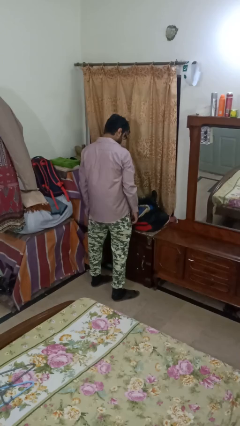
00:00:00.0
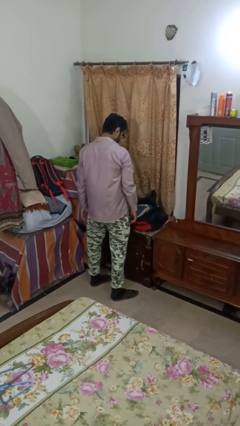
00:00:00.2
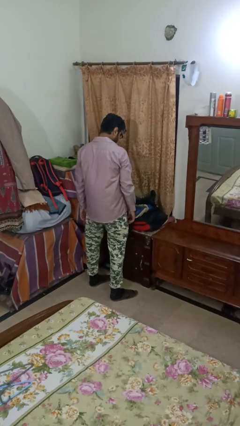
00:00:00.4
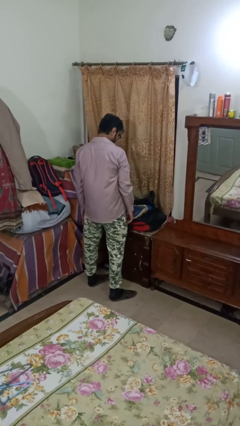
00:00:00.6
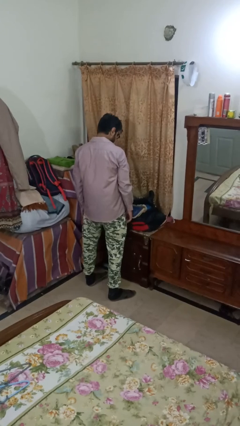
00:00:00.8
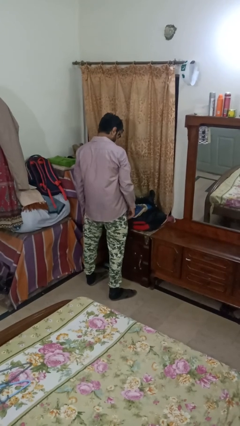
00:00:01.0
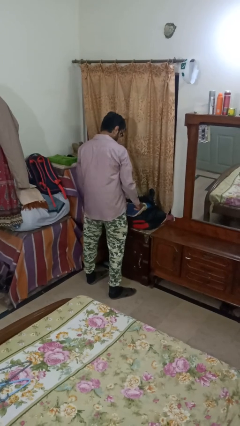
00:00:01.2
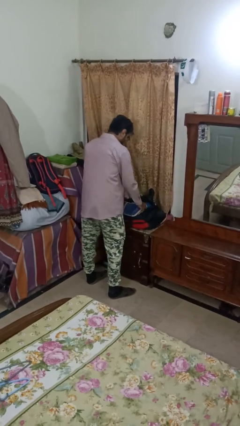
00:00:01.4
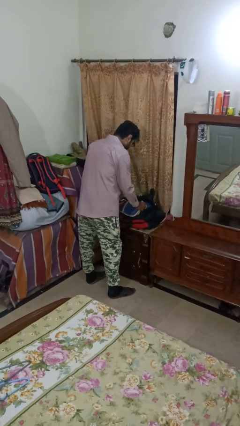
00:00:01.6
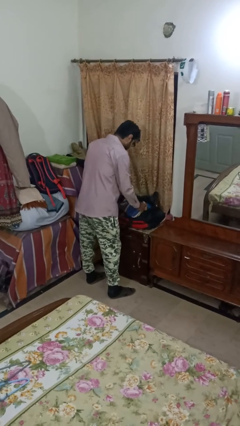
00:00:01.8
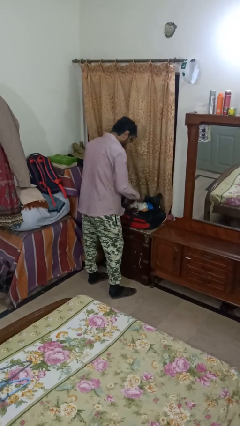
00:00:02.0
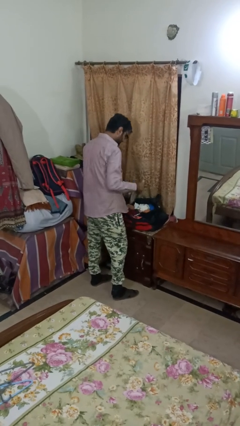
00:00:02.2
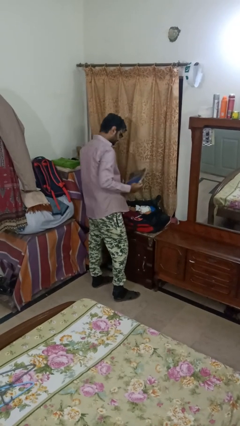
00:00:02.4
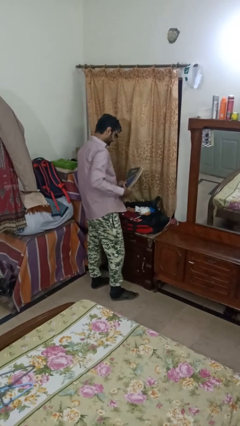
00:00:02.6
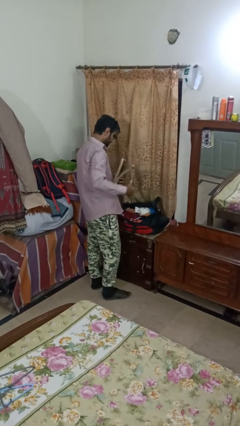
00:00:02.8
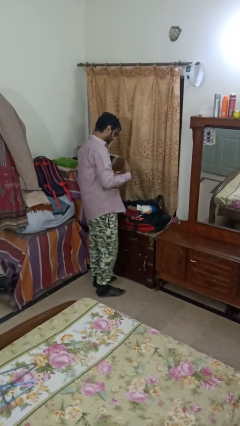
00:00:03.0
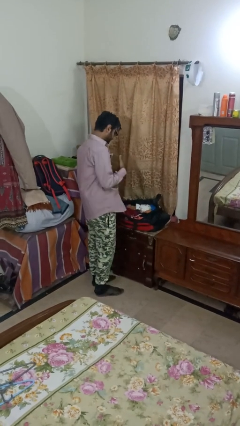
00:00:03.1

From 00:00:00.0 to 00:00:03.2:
person takes object from bag

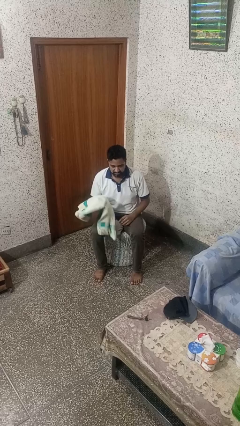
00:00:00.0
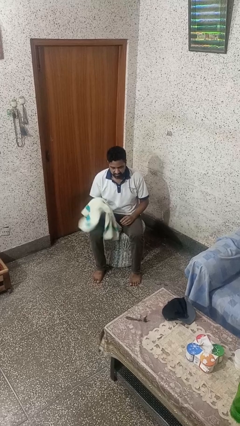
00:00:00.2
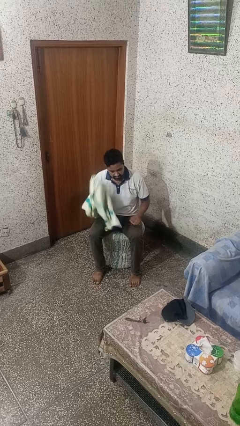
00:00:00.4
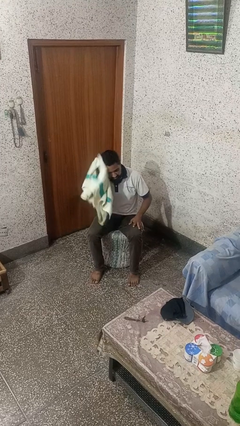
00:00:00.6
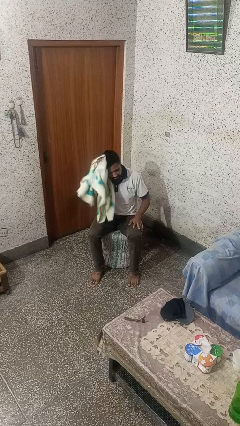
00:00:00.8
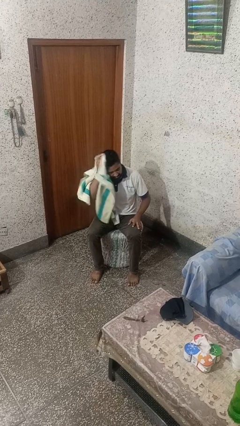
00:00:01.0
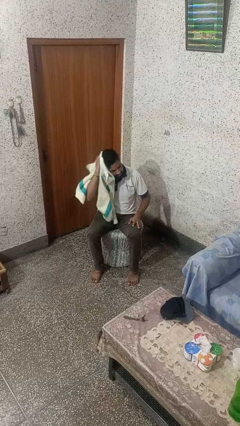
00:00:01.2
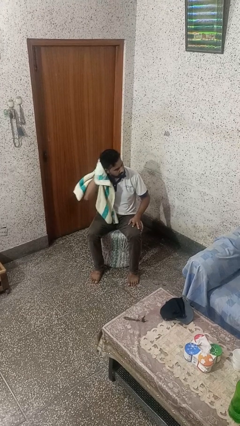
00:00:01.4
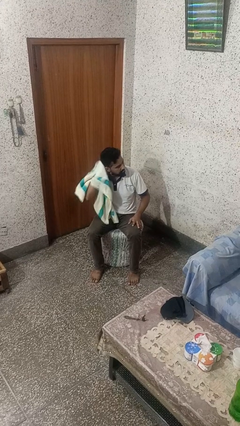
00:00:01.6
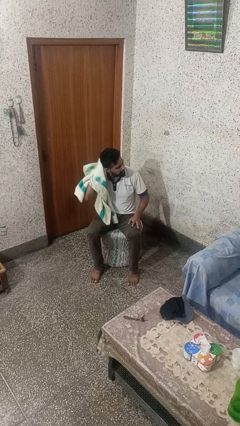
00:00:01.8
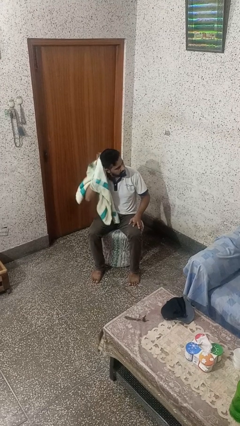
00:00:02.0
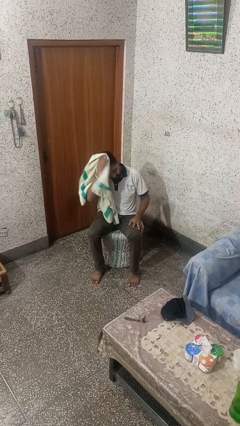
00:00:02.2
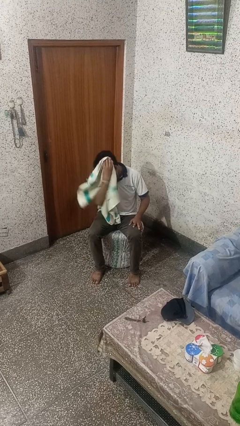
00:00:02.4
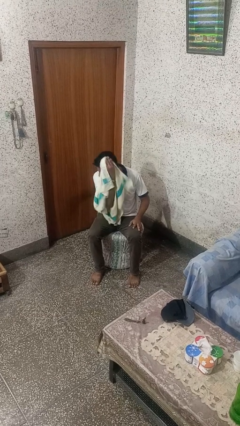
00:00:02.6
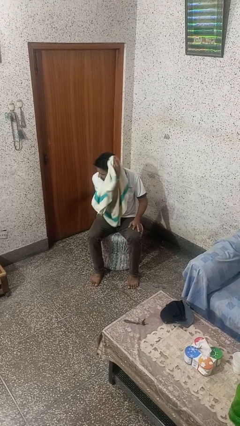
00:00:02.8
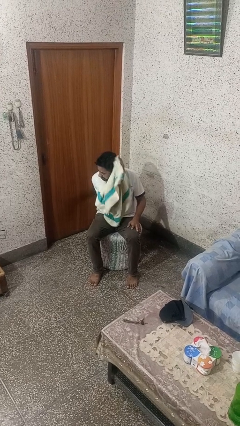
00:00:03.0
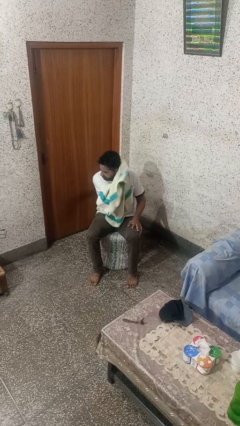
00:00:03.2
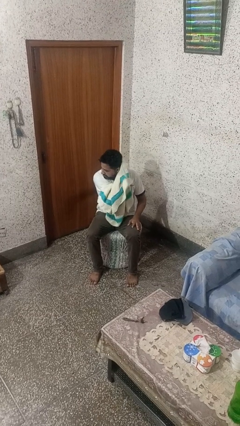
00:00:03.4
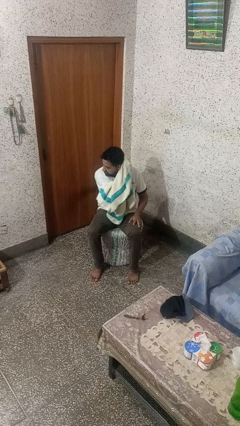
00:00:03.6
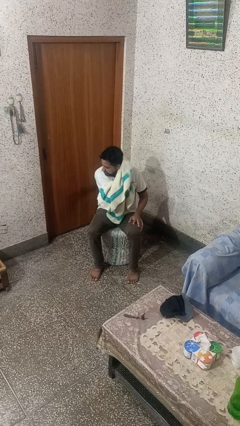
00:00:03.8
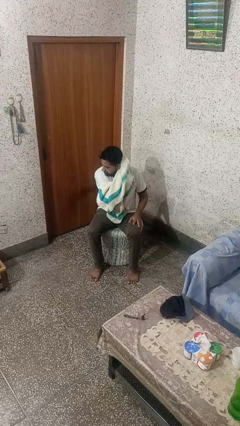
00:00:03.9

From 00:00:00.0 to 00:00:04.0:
person dries hair with towel

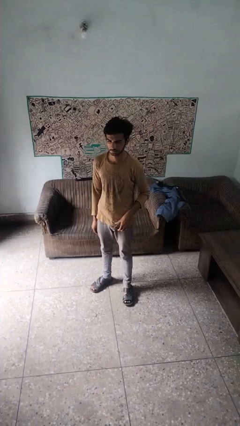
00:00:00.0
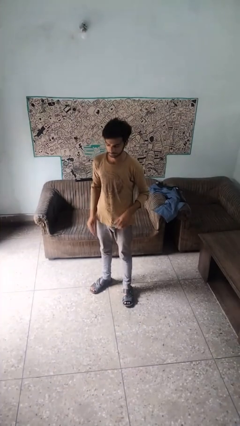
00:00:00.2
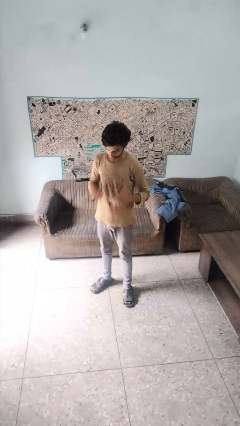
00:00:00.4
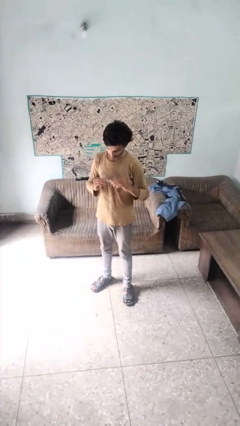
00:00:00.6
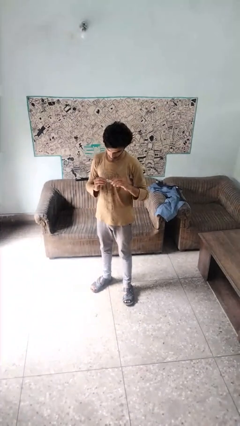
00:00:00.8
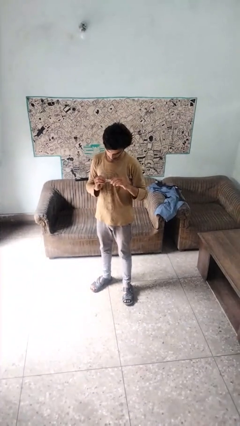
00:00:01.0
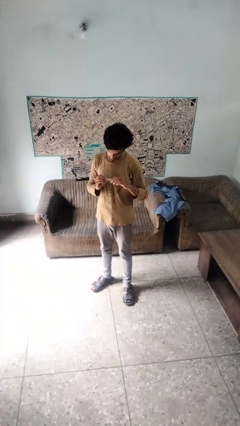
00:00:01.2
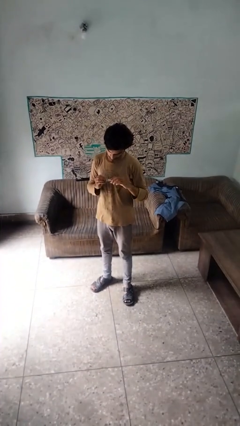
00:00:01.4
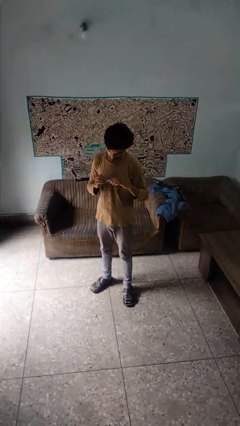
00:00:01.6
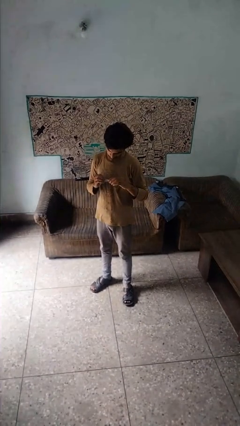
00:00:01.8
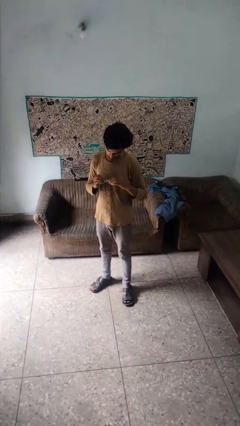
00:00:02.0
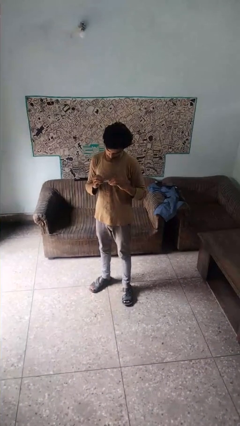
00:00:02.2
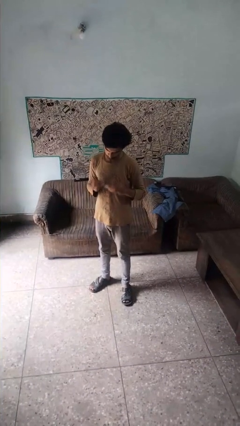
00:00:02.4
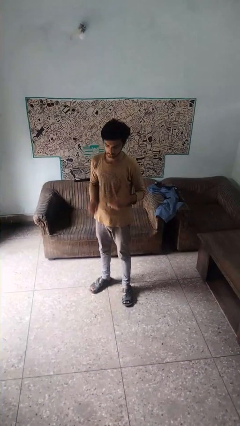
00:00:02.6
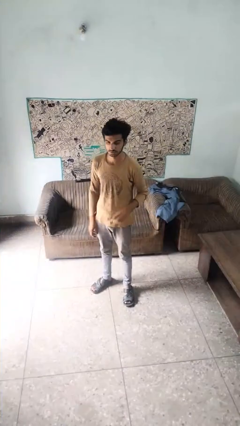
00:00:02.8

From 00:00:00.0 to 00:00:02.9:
person clips fingernails

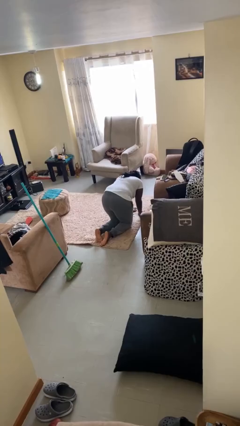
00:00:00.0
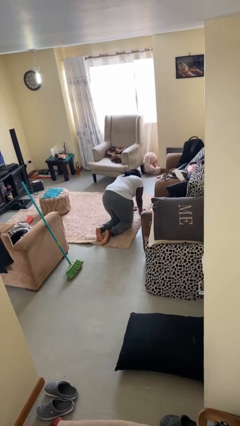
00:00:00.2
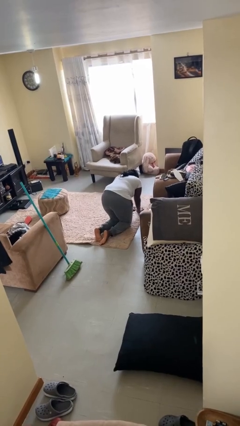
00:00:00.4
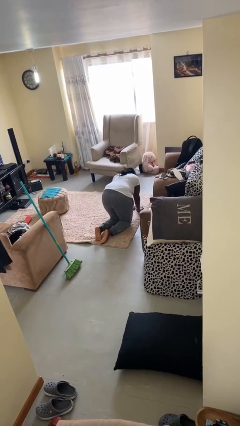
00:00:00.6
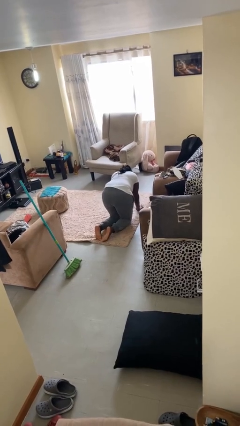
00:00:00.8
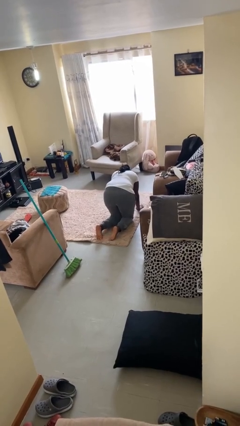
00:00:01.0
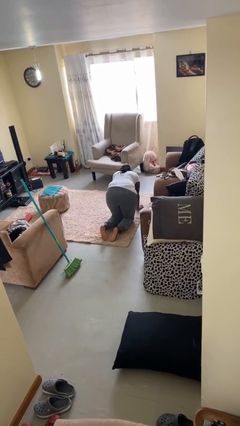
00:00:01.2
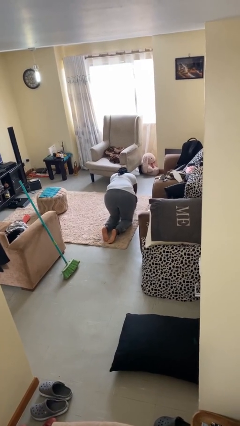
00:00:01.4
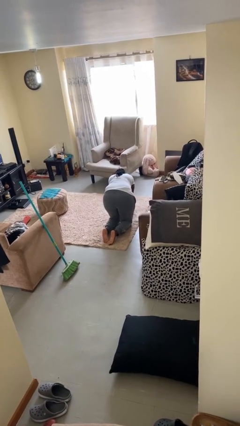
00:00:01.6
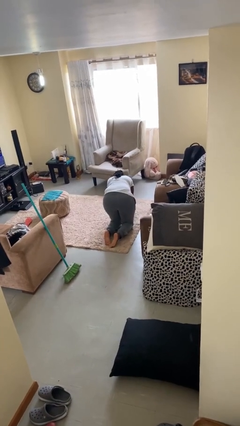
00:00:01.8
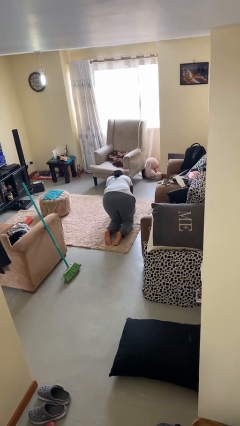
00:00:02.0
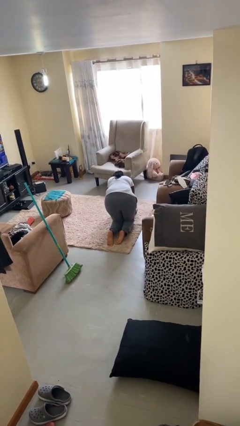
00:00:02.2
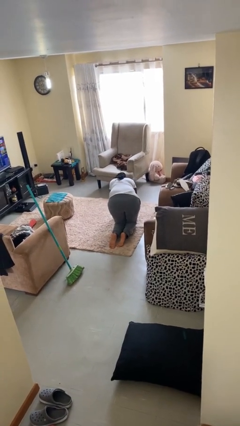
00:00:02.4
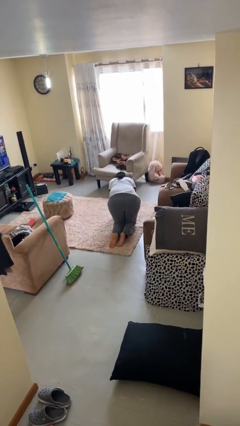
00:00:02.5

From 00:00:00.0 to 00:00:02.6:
person crawls

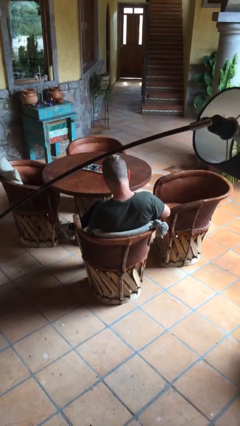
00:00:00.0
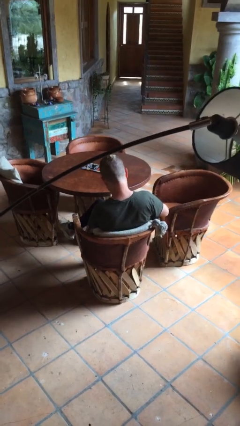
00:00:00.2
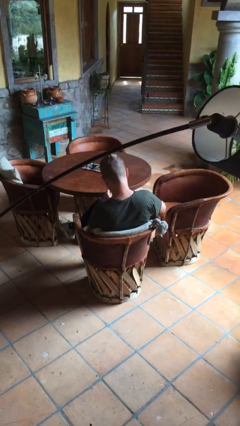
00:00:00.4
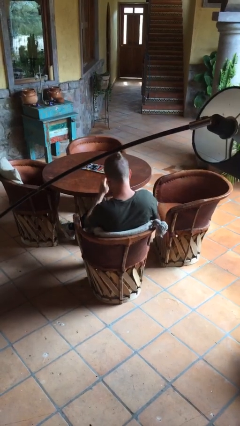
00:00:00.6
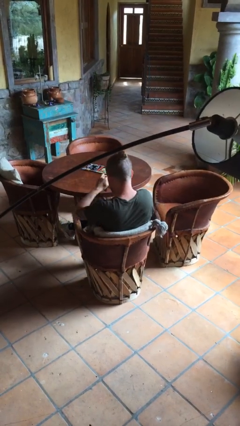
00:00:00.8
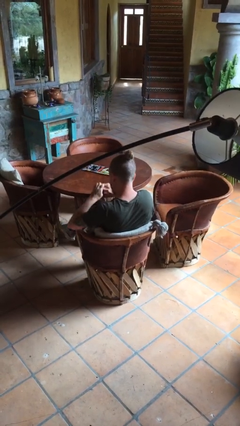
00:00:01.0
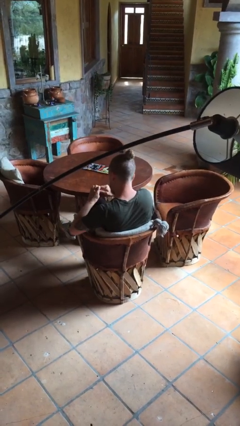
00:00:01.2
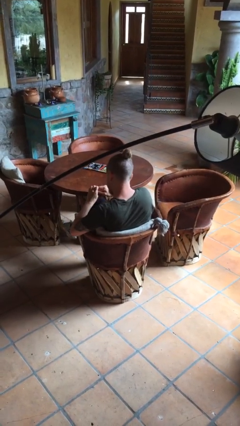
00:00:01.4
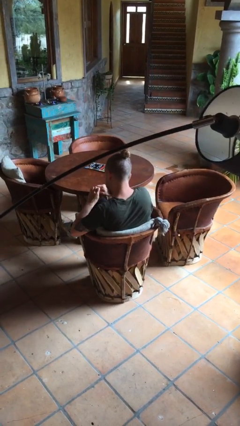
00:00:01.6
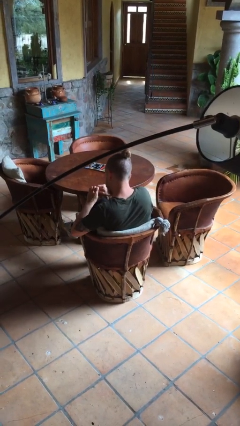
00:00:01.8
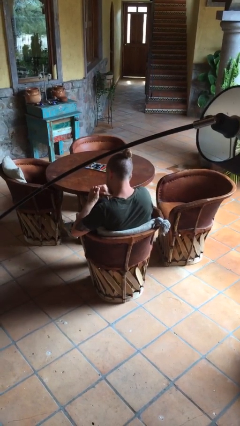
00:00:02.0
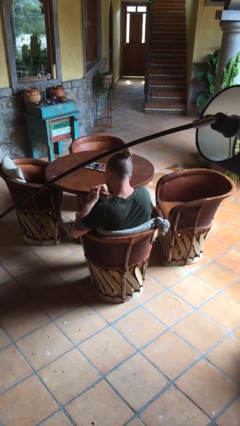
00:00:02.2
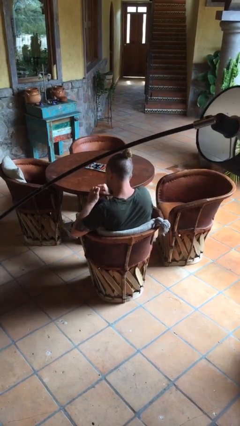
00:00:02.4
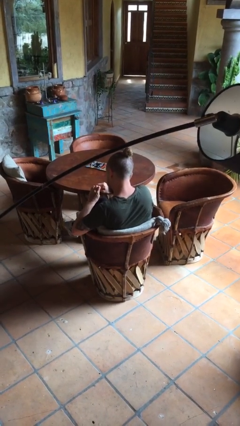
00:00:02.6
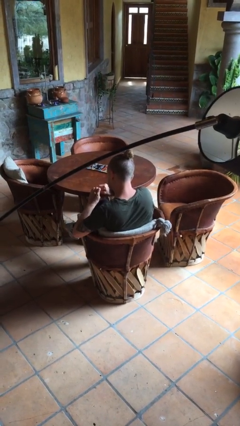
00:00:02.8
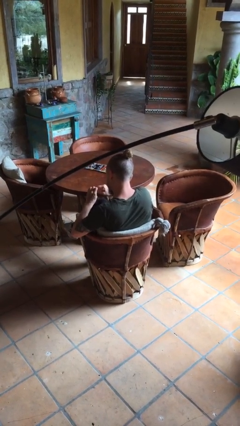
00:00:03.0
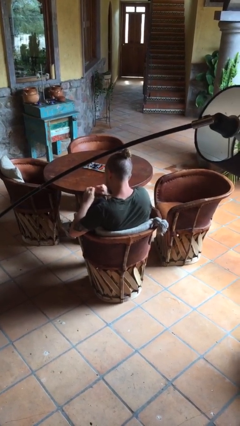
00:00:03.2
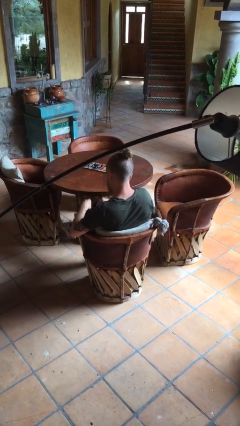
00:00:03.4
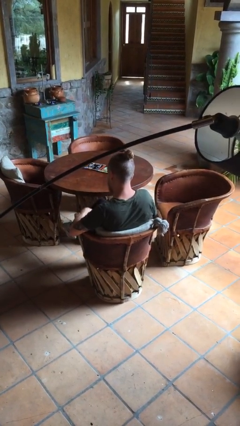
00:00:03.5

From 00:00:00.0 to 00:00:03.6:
person files fingernails

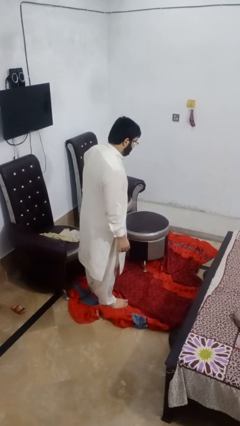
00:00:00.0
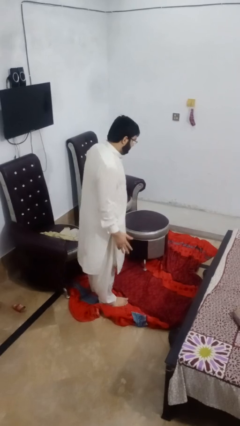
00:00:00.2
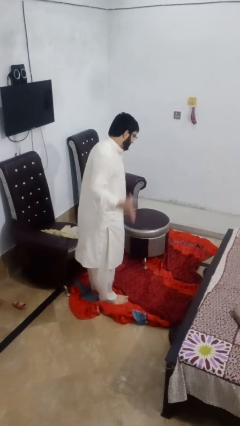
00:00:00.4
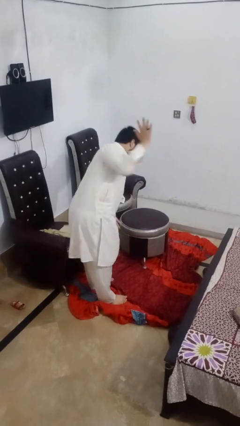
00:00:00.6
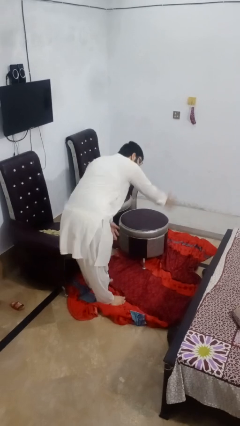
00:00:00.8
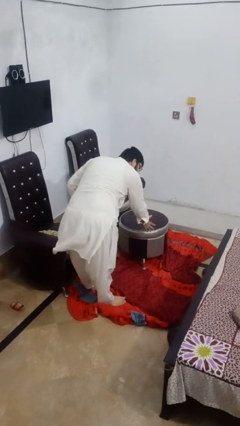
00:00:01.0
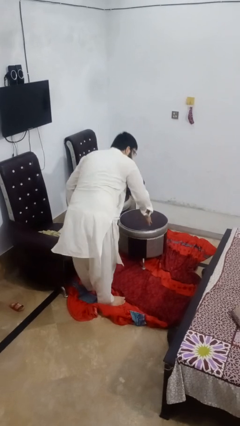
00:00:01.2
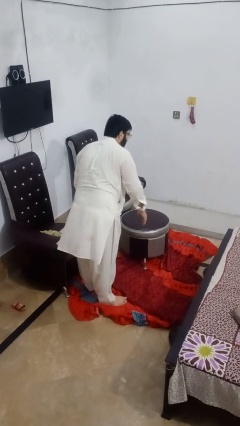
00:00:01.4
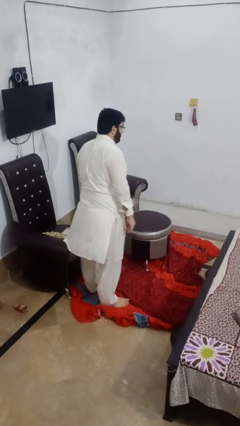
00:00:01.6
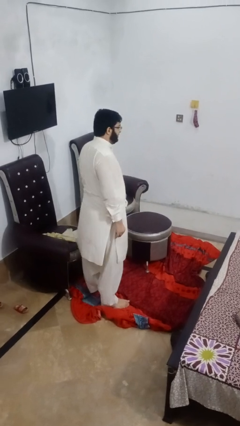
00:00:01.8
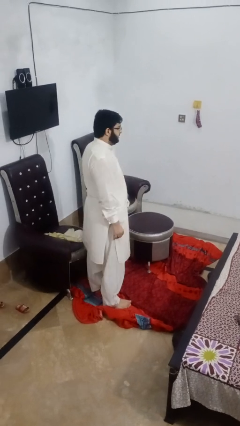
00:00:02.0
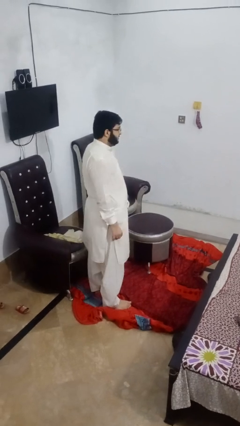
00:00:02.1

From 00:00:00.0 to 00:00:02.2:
person karate chop